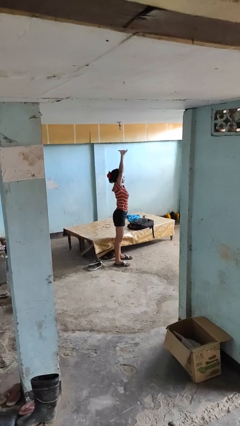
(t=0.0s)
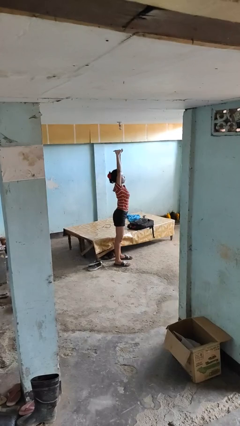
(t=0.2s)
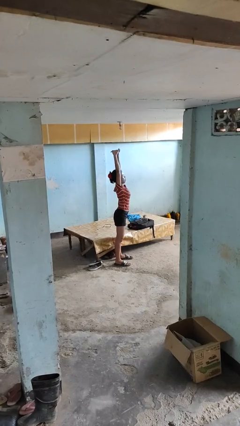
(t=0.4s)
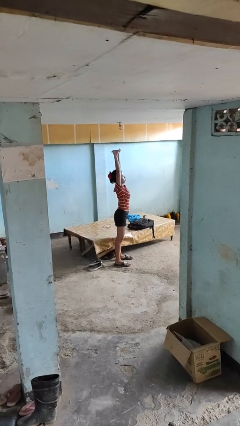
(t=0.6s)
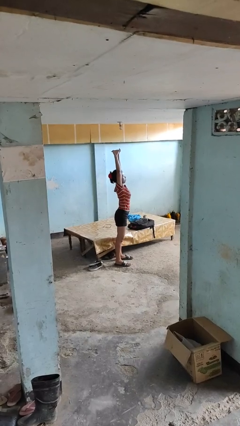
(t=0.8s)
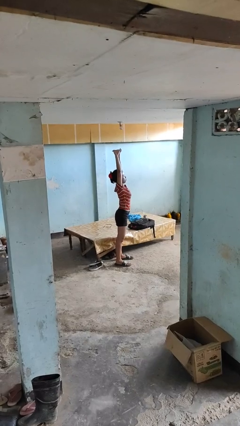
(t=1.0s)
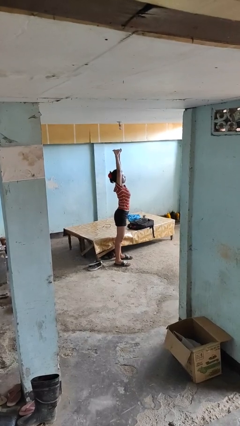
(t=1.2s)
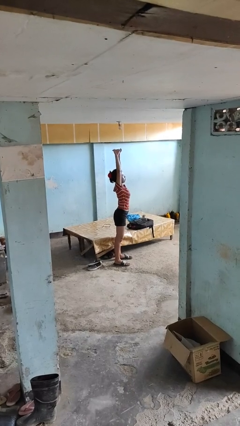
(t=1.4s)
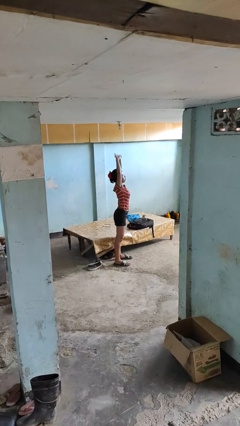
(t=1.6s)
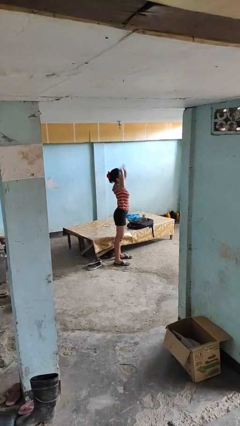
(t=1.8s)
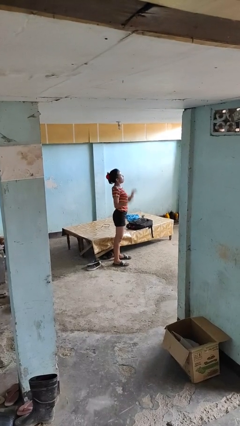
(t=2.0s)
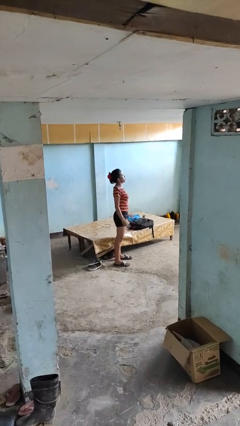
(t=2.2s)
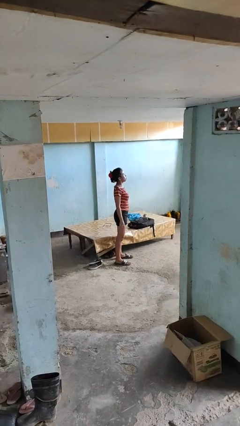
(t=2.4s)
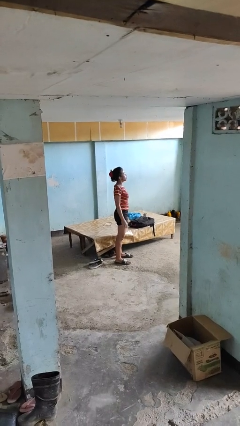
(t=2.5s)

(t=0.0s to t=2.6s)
person stretches arms over head

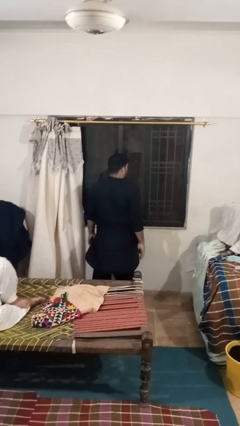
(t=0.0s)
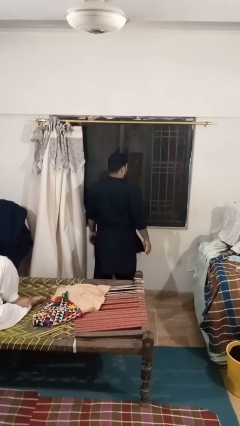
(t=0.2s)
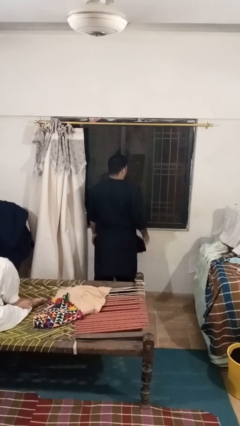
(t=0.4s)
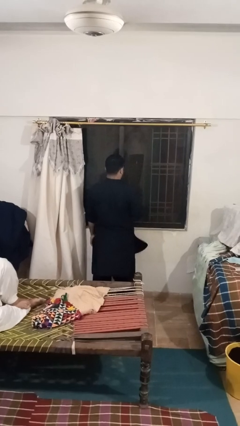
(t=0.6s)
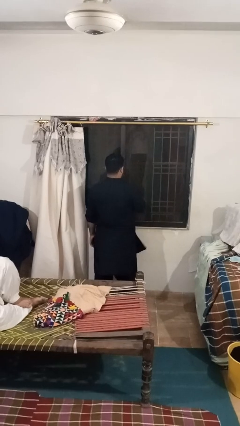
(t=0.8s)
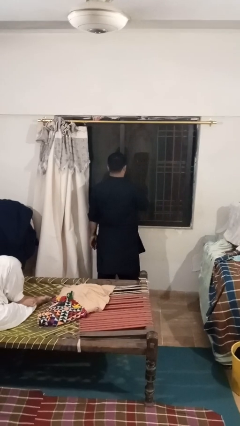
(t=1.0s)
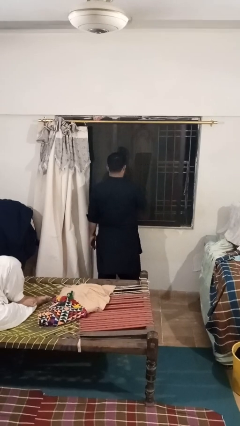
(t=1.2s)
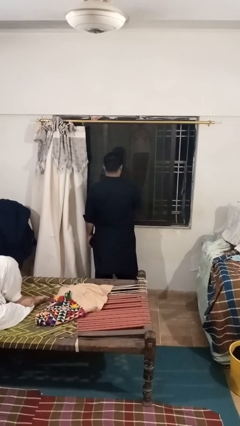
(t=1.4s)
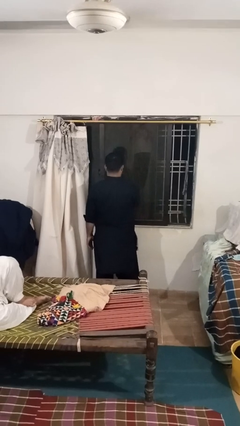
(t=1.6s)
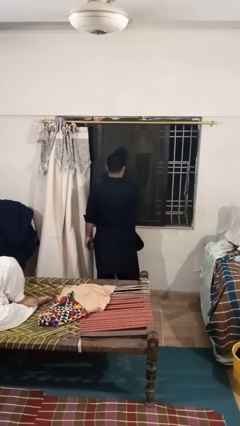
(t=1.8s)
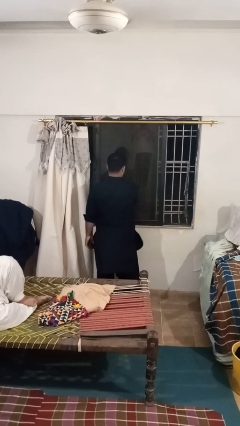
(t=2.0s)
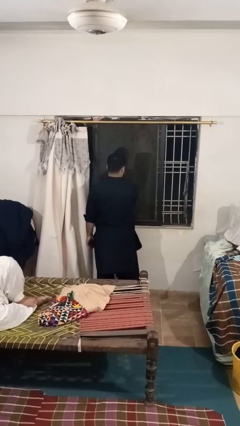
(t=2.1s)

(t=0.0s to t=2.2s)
person opens sliding door

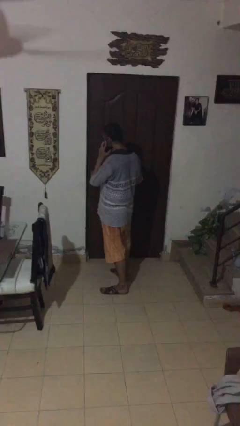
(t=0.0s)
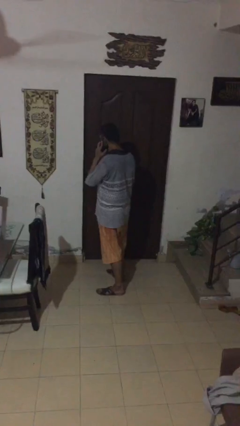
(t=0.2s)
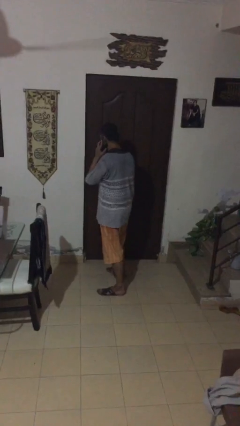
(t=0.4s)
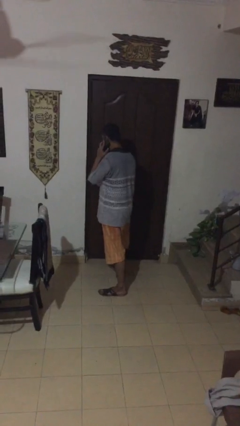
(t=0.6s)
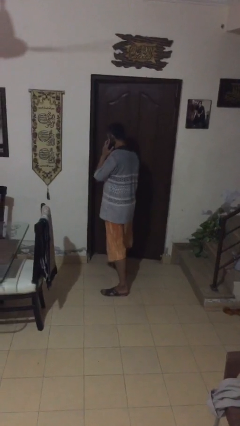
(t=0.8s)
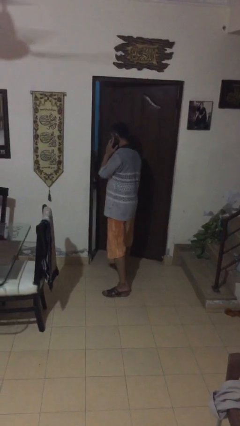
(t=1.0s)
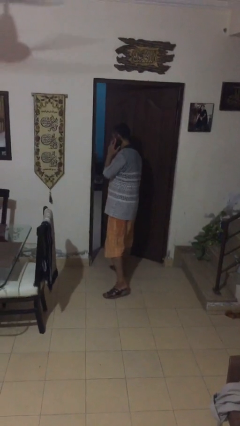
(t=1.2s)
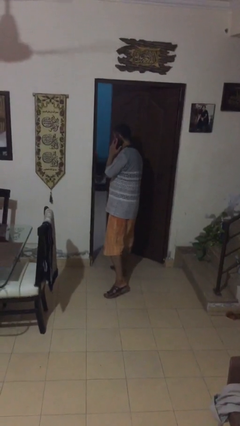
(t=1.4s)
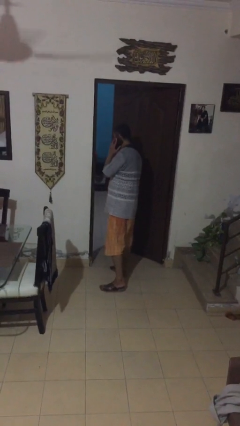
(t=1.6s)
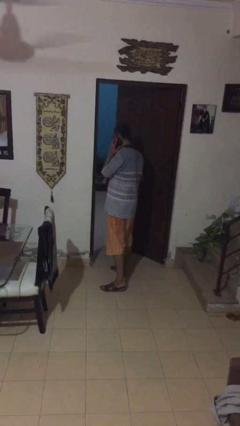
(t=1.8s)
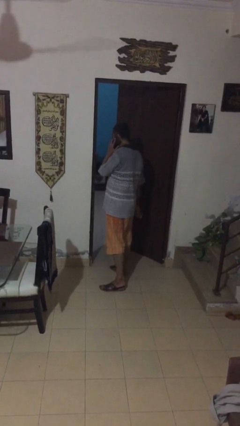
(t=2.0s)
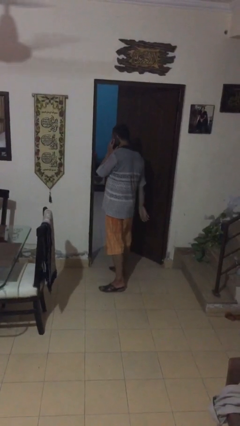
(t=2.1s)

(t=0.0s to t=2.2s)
person opens facility door

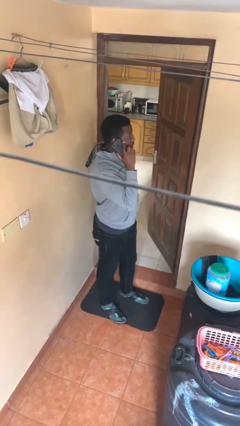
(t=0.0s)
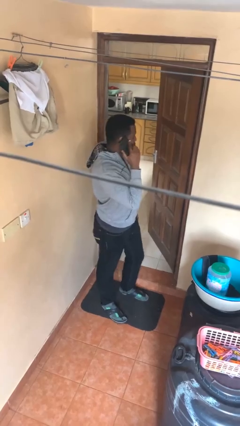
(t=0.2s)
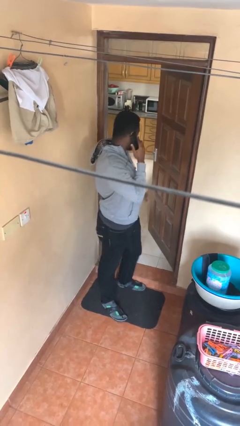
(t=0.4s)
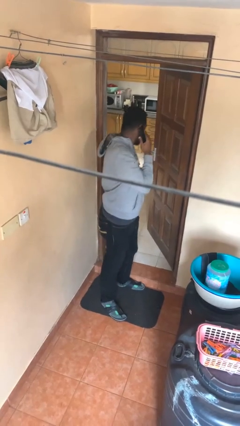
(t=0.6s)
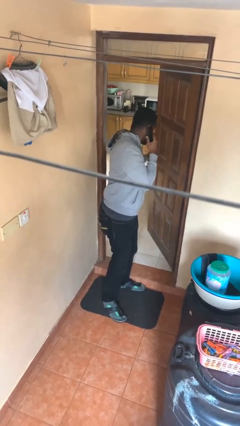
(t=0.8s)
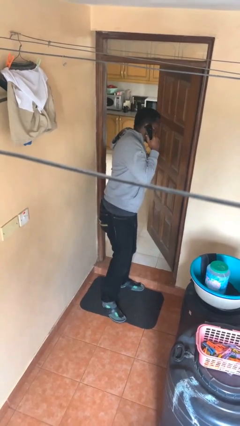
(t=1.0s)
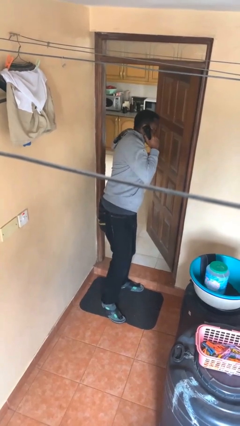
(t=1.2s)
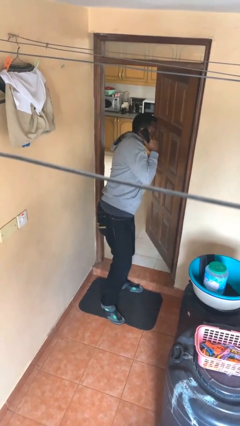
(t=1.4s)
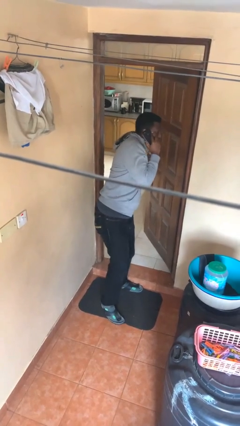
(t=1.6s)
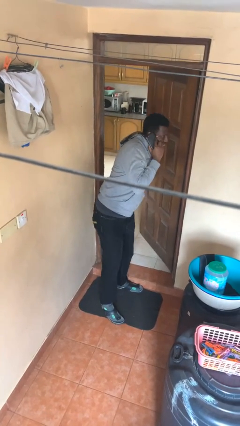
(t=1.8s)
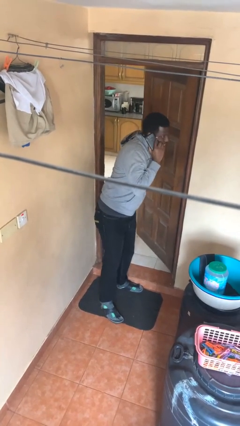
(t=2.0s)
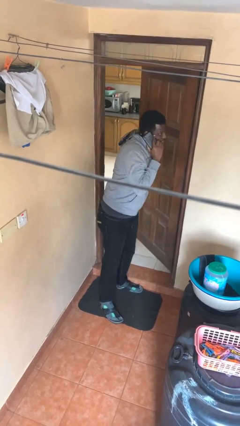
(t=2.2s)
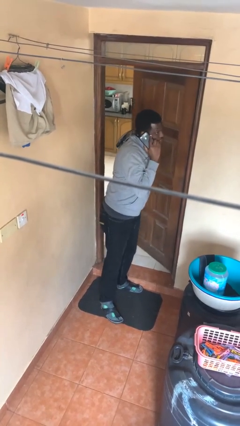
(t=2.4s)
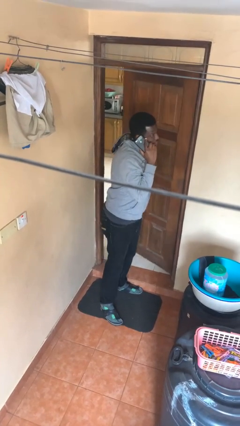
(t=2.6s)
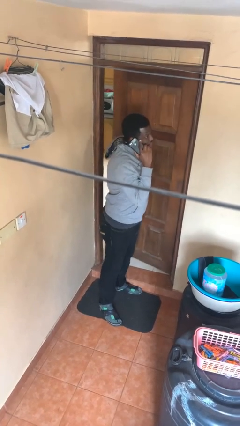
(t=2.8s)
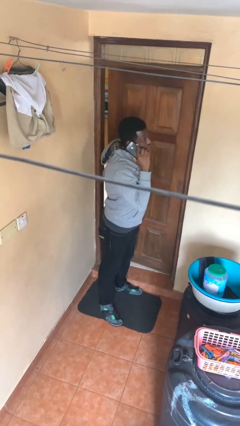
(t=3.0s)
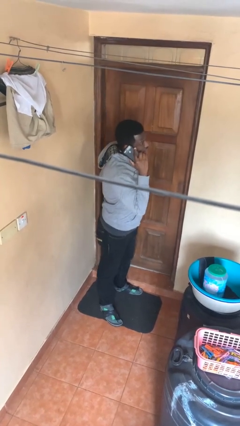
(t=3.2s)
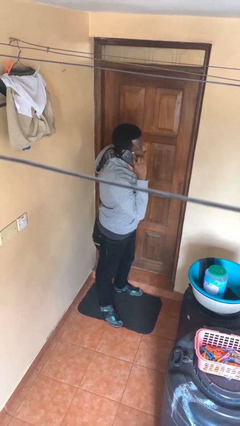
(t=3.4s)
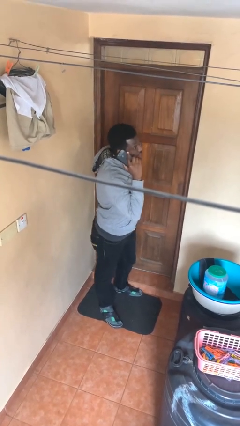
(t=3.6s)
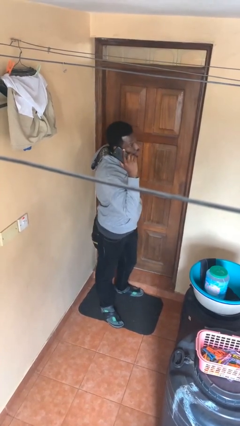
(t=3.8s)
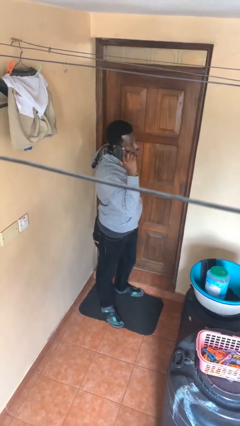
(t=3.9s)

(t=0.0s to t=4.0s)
person closes facility door

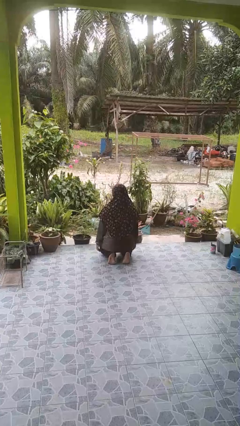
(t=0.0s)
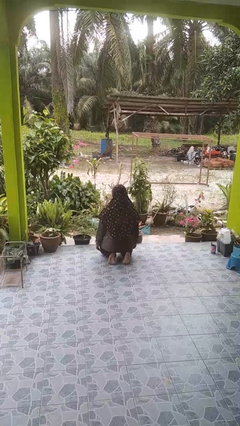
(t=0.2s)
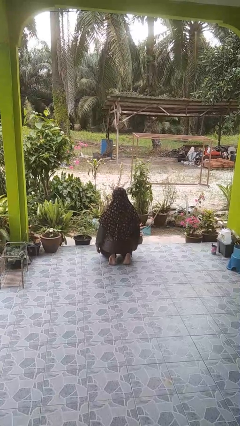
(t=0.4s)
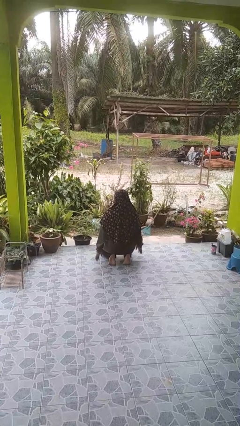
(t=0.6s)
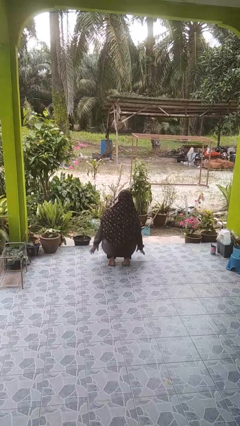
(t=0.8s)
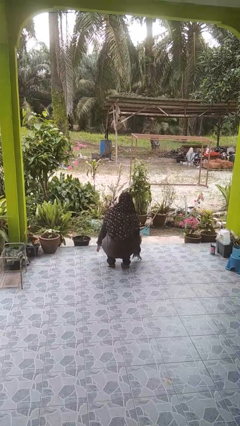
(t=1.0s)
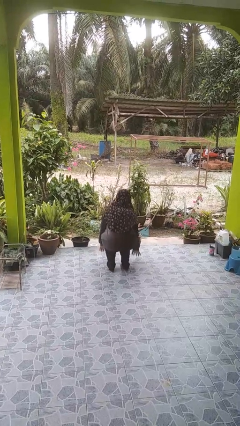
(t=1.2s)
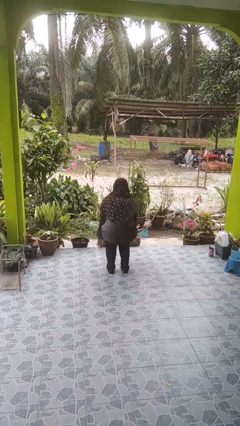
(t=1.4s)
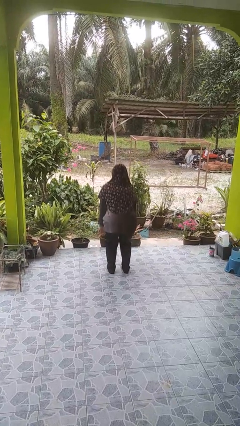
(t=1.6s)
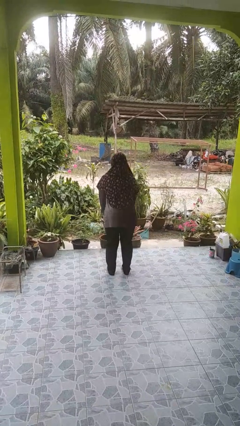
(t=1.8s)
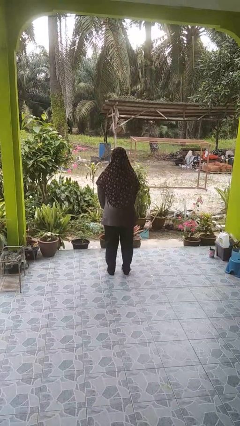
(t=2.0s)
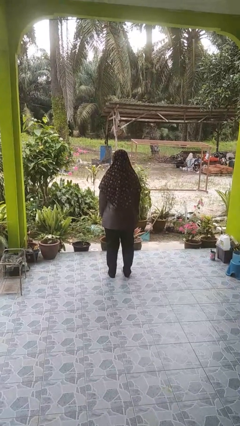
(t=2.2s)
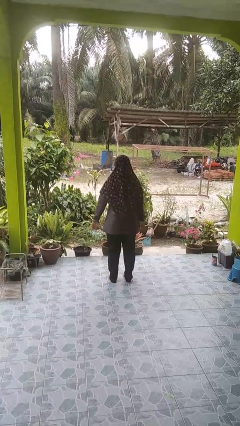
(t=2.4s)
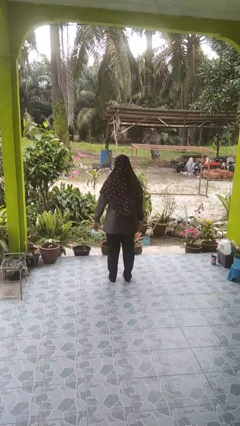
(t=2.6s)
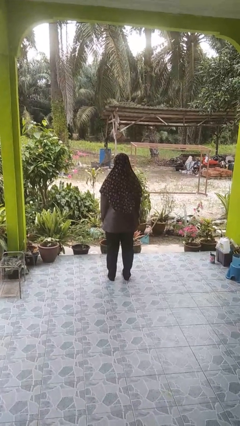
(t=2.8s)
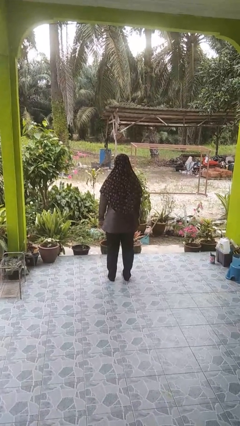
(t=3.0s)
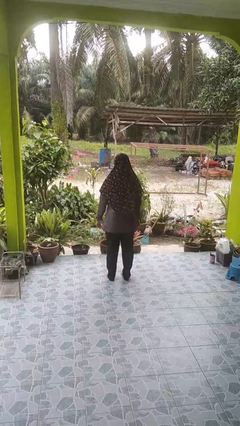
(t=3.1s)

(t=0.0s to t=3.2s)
person stands up from floor

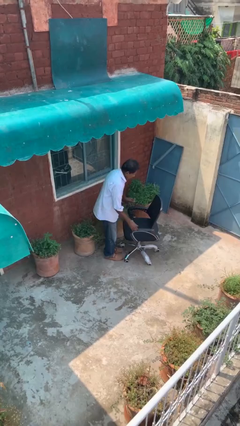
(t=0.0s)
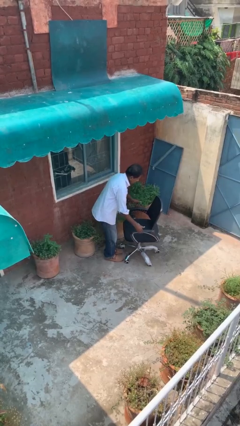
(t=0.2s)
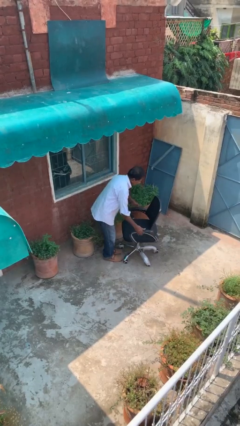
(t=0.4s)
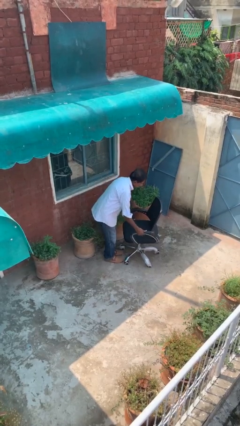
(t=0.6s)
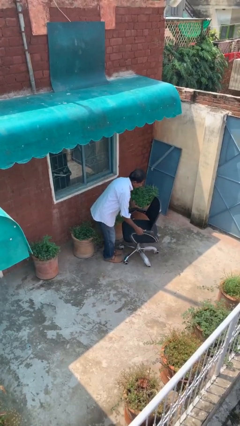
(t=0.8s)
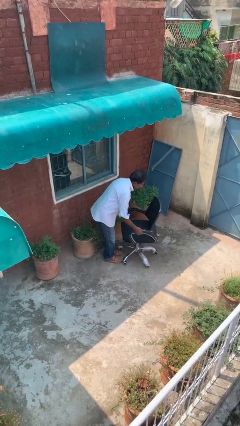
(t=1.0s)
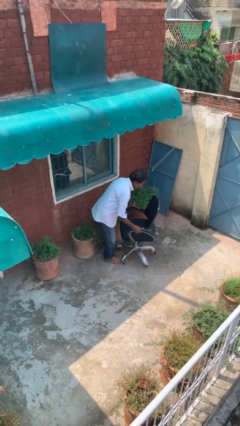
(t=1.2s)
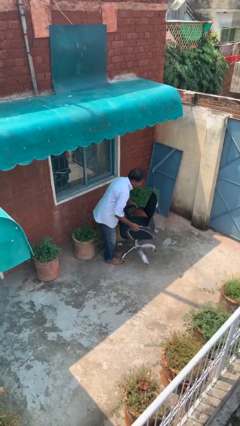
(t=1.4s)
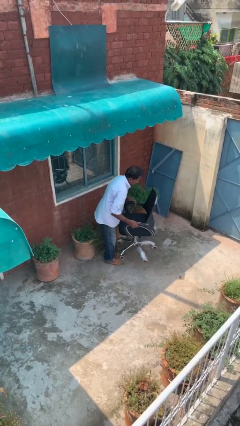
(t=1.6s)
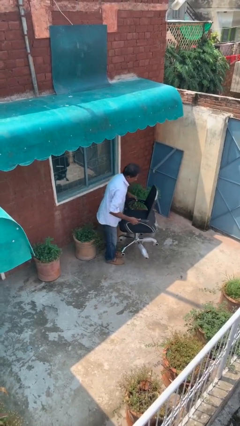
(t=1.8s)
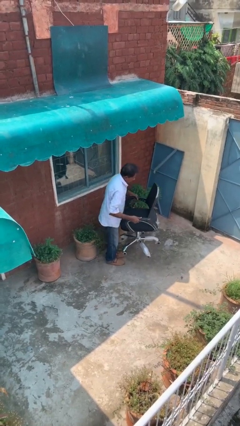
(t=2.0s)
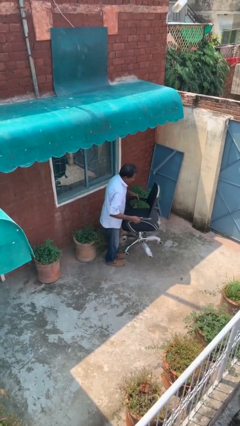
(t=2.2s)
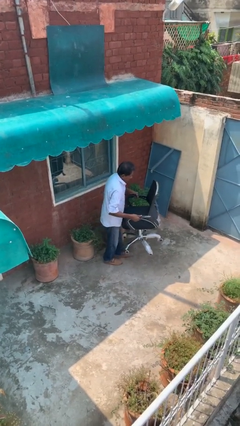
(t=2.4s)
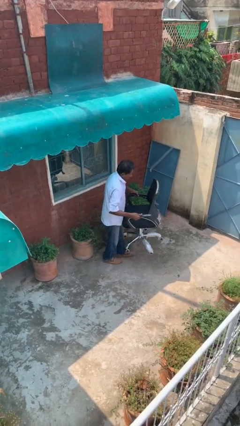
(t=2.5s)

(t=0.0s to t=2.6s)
person picks up object from floor

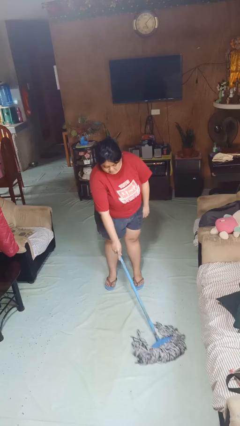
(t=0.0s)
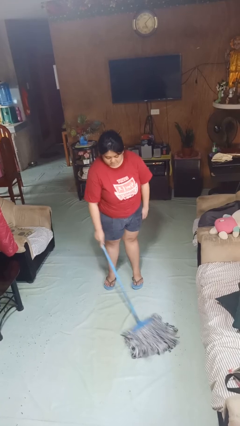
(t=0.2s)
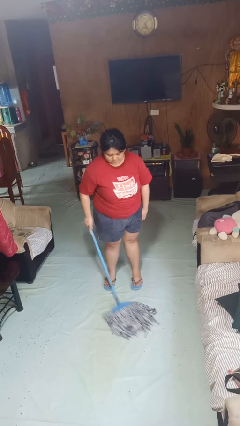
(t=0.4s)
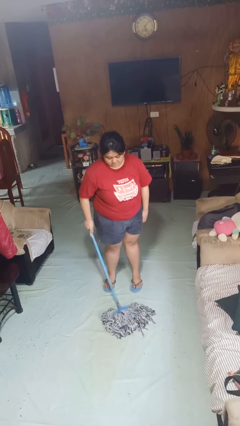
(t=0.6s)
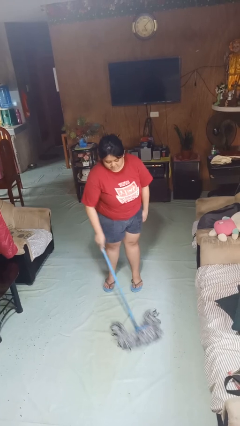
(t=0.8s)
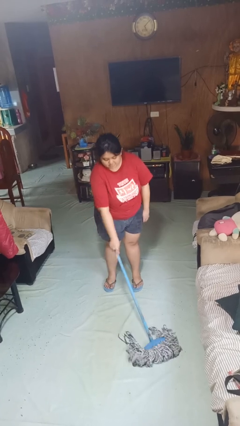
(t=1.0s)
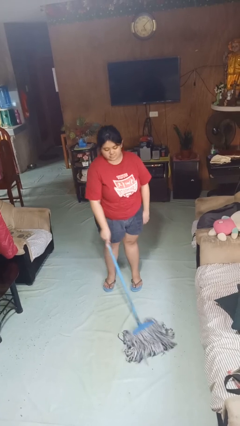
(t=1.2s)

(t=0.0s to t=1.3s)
person mops
